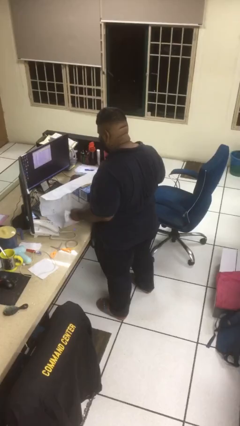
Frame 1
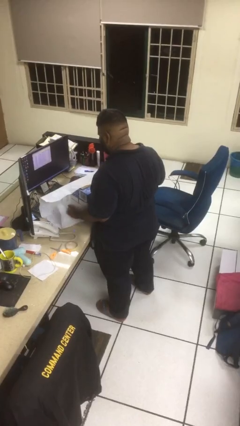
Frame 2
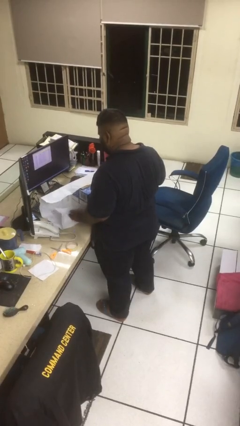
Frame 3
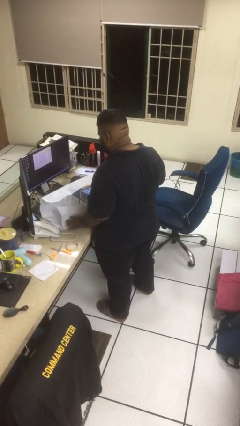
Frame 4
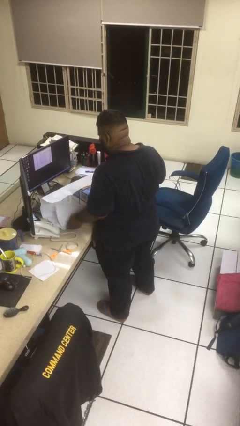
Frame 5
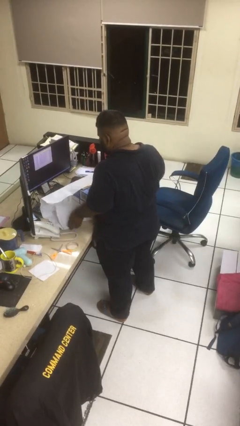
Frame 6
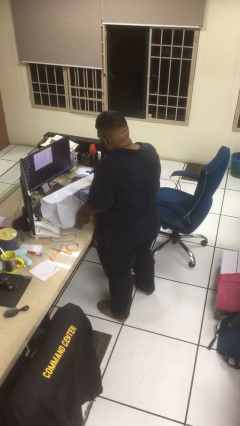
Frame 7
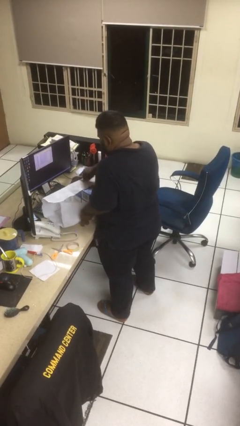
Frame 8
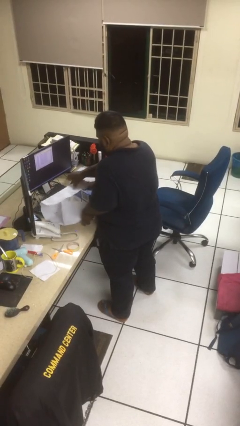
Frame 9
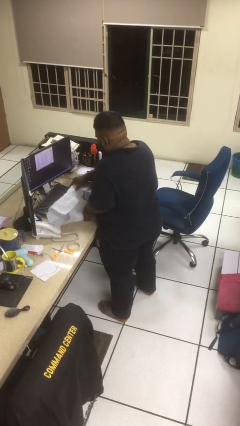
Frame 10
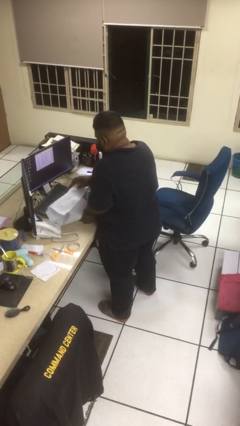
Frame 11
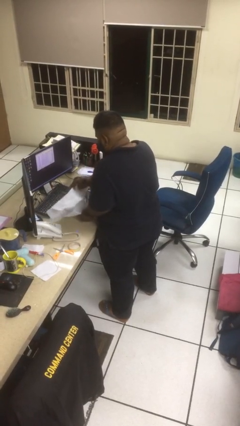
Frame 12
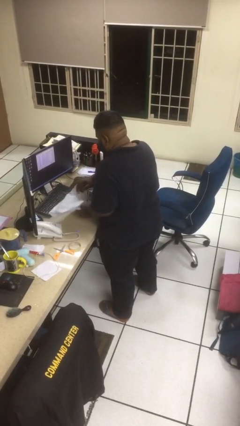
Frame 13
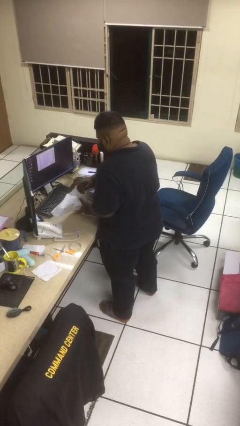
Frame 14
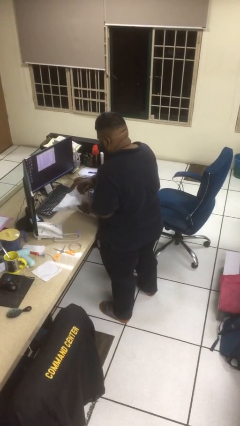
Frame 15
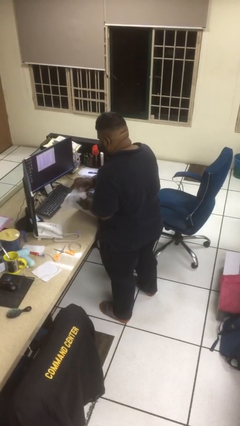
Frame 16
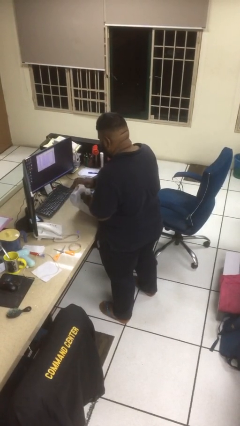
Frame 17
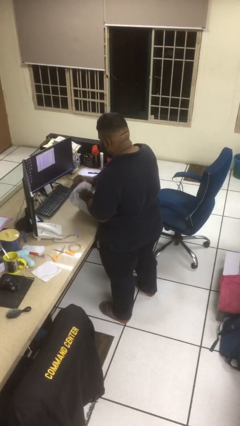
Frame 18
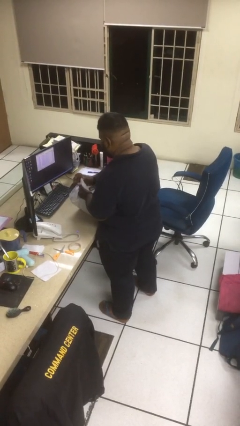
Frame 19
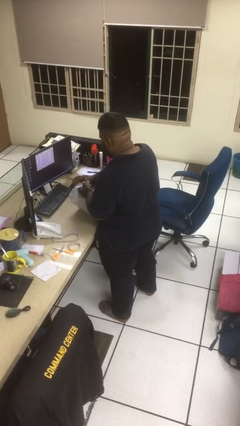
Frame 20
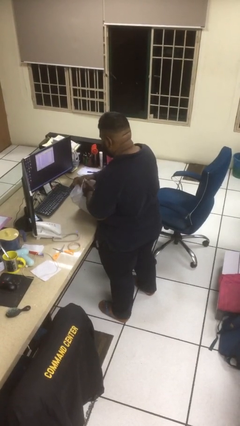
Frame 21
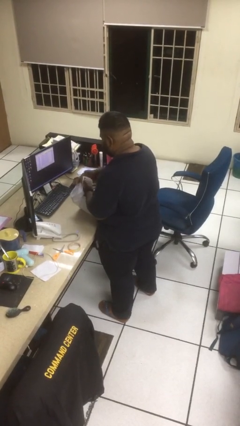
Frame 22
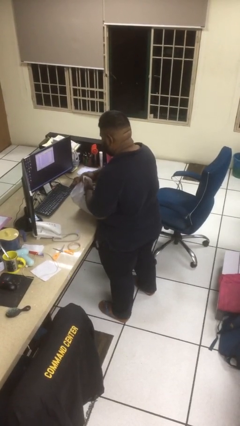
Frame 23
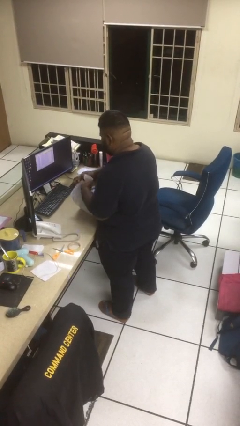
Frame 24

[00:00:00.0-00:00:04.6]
person wraps box

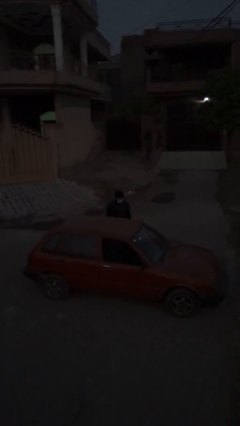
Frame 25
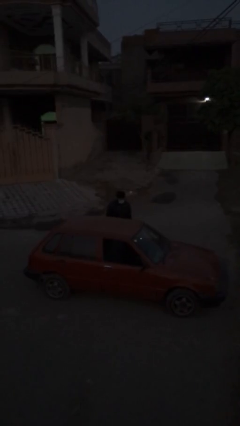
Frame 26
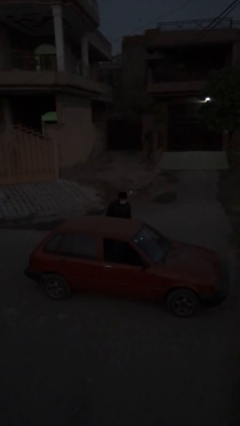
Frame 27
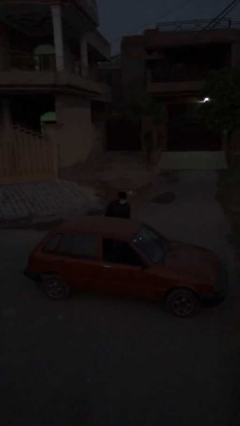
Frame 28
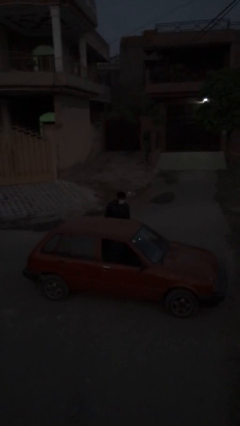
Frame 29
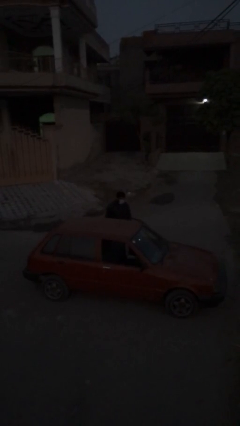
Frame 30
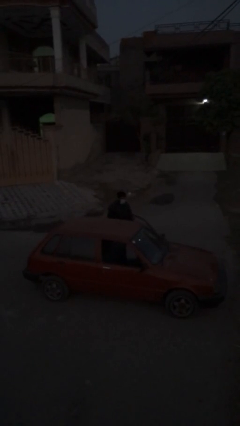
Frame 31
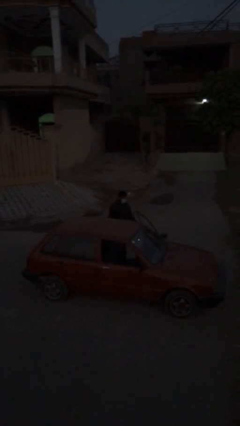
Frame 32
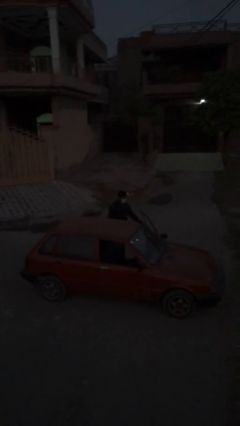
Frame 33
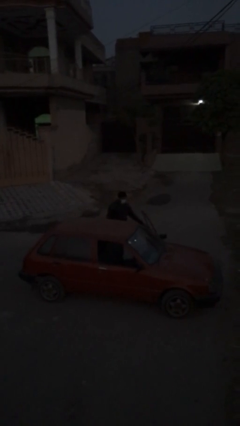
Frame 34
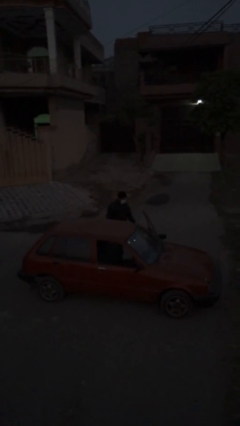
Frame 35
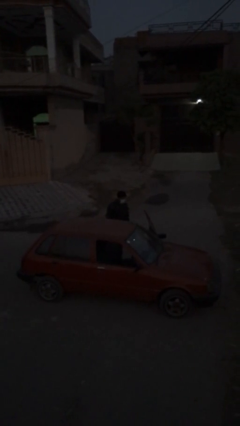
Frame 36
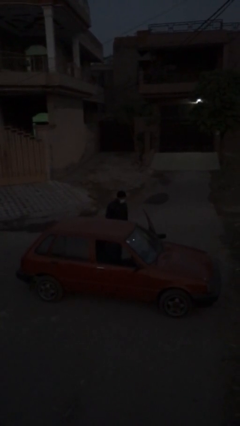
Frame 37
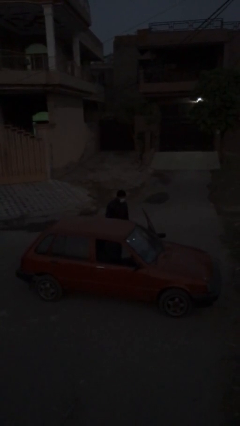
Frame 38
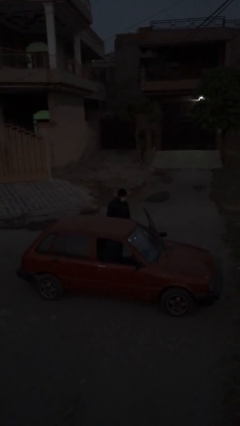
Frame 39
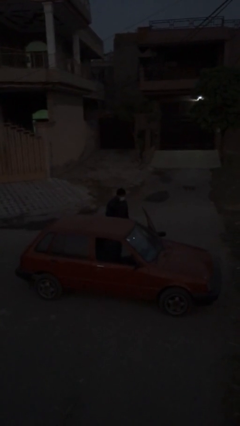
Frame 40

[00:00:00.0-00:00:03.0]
person opens car door

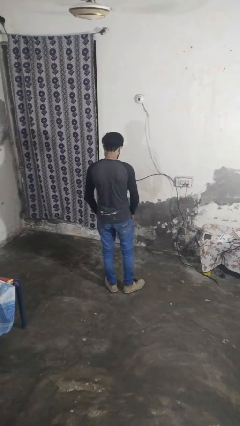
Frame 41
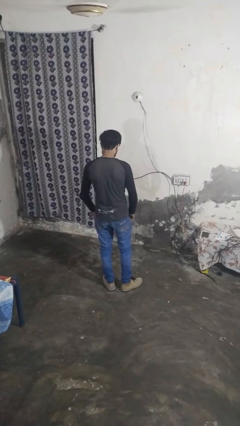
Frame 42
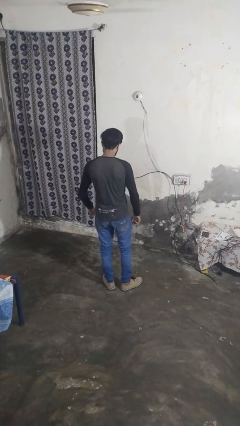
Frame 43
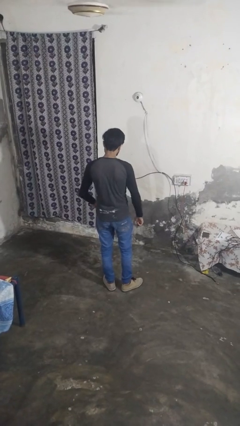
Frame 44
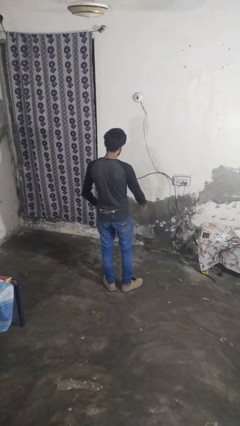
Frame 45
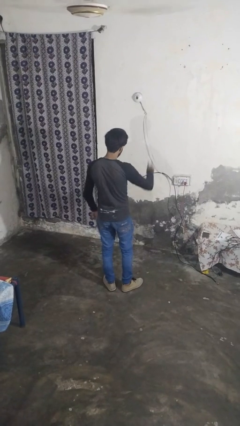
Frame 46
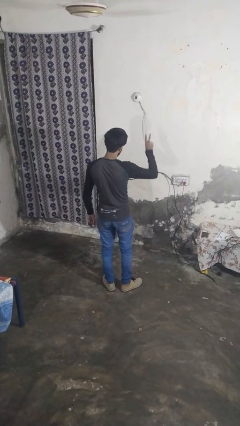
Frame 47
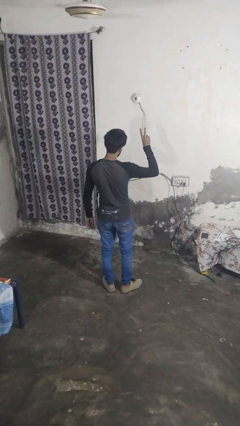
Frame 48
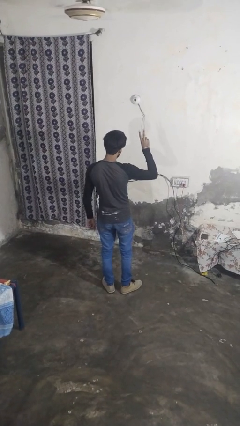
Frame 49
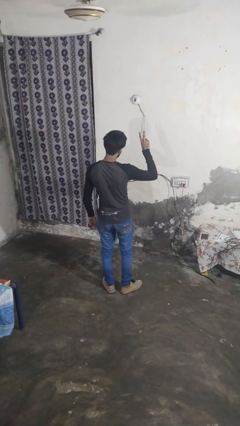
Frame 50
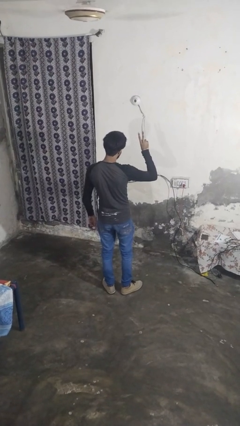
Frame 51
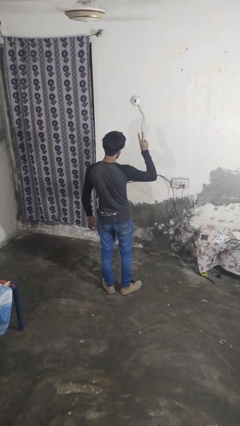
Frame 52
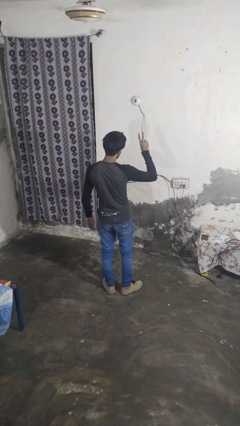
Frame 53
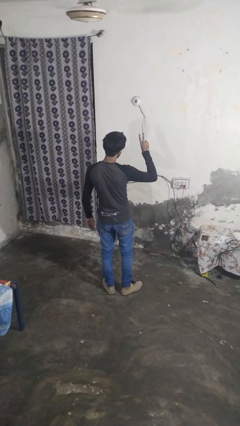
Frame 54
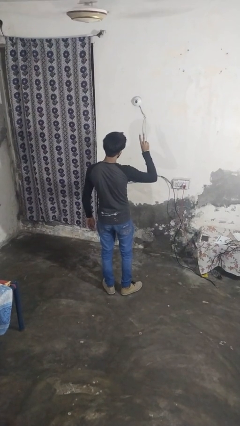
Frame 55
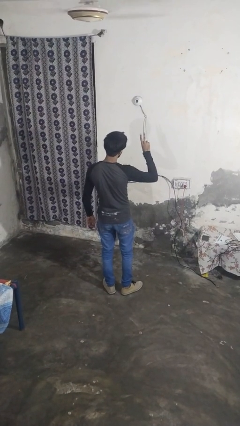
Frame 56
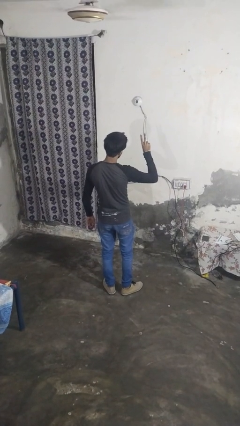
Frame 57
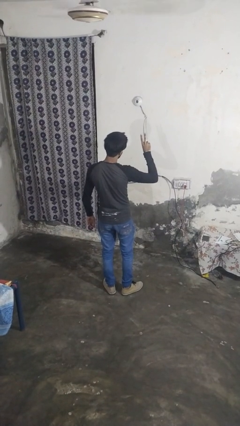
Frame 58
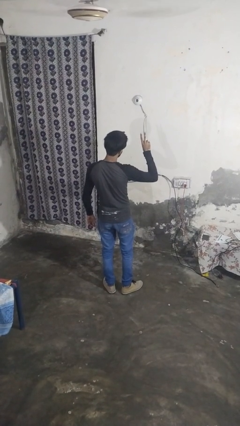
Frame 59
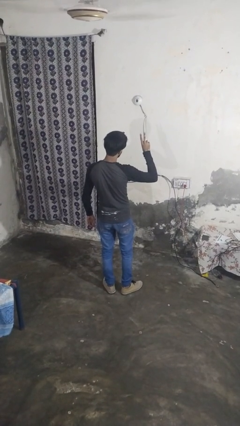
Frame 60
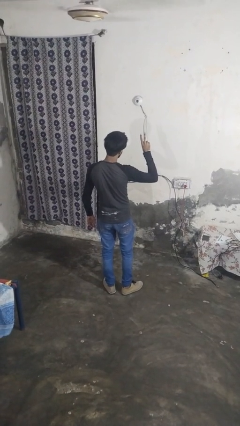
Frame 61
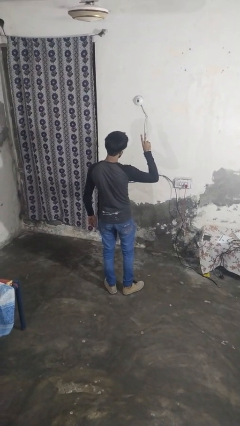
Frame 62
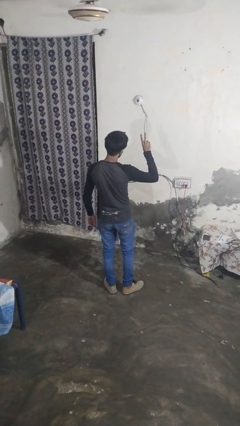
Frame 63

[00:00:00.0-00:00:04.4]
person gestures peace

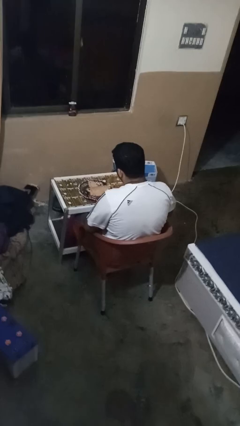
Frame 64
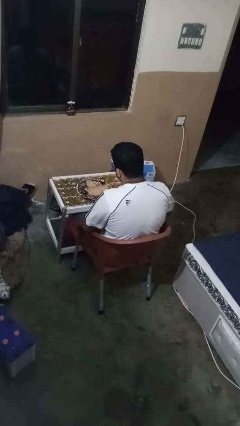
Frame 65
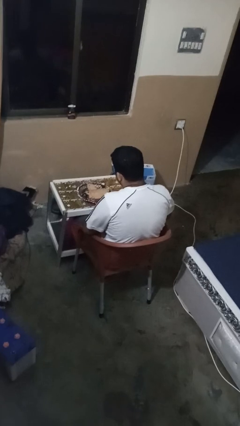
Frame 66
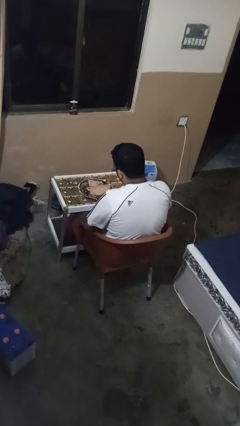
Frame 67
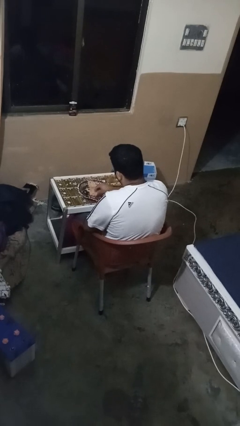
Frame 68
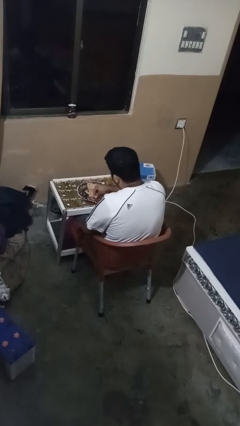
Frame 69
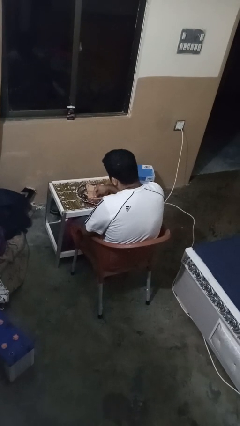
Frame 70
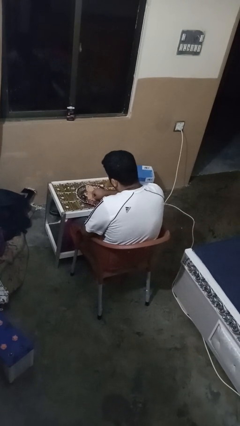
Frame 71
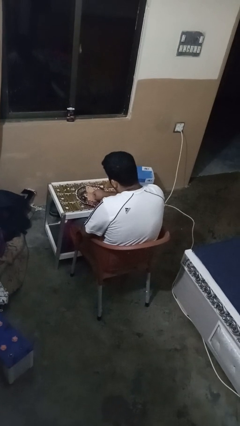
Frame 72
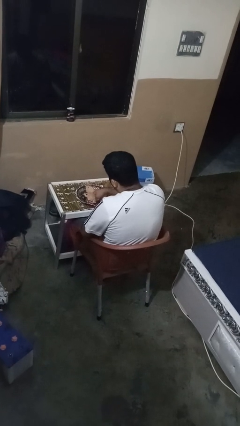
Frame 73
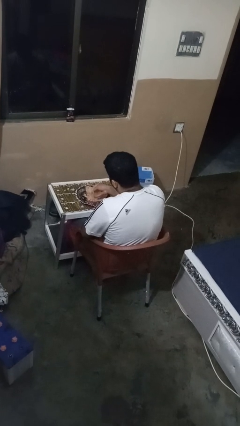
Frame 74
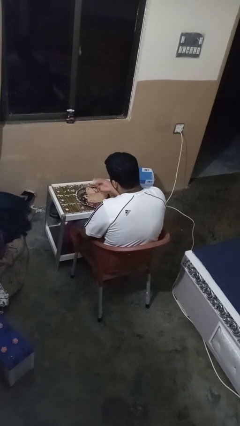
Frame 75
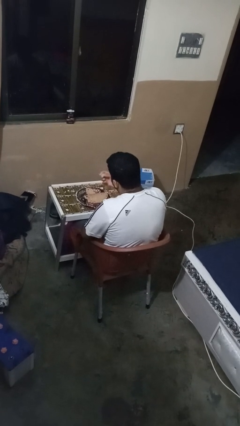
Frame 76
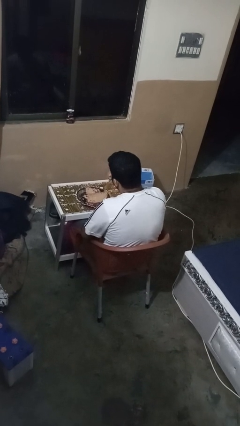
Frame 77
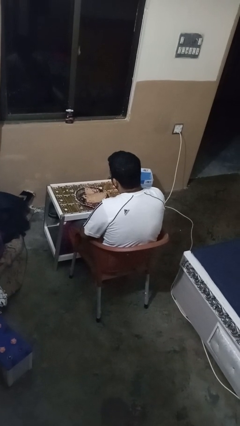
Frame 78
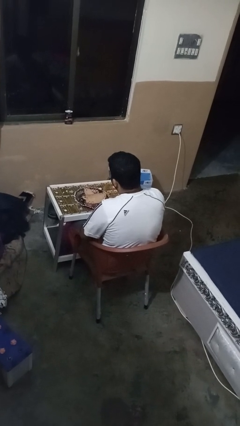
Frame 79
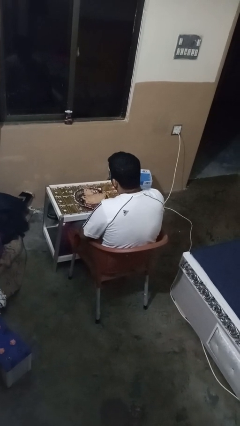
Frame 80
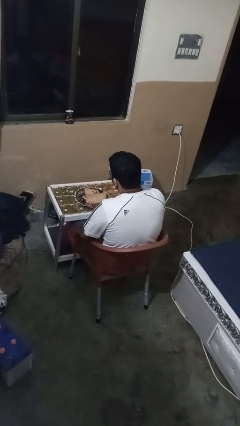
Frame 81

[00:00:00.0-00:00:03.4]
person eats with hands

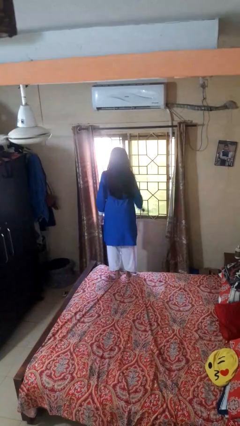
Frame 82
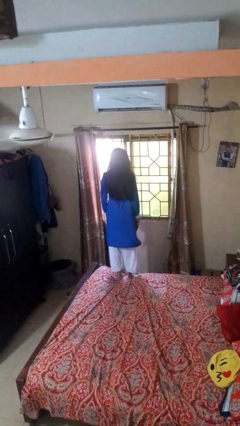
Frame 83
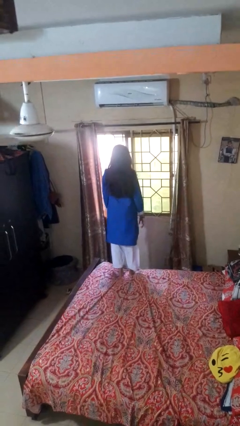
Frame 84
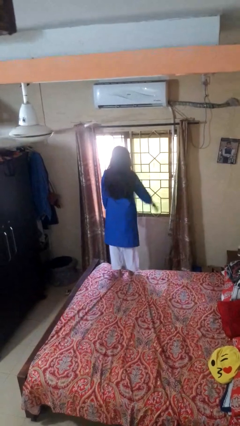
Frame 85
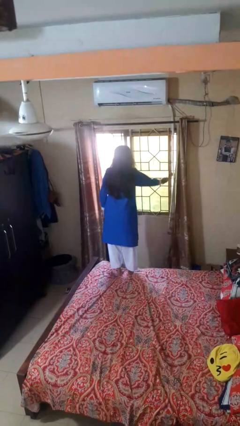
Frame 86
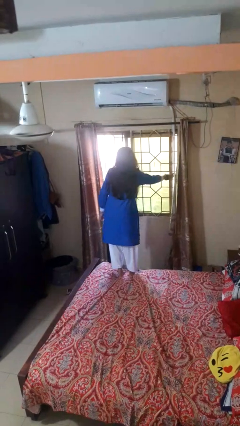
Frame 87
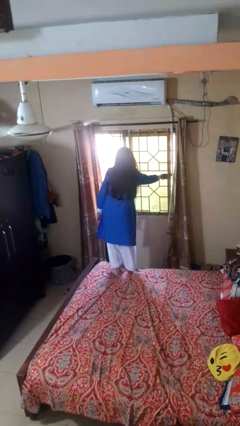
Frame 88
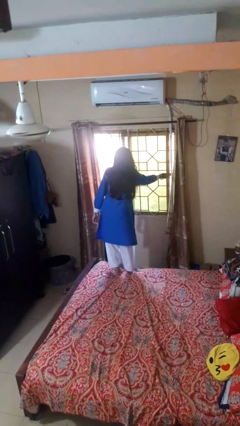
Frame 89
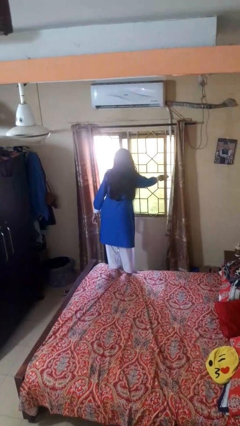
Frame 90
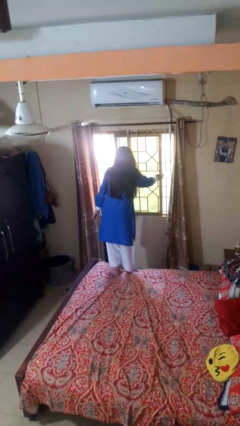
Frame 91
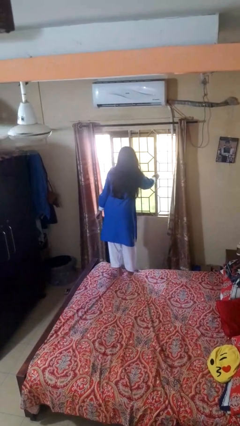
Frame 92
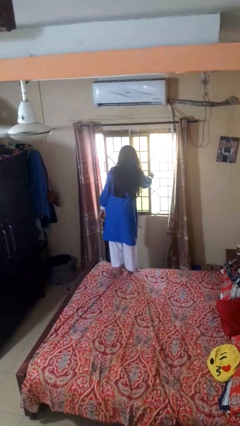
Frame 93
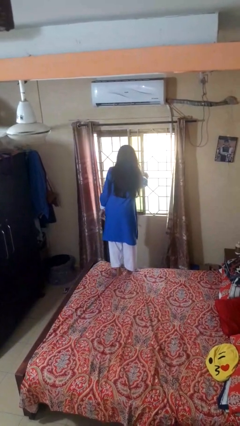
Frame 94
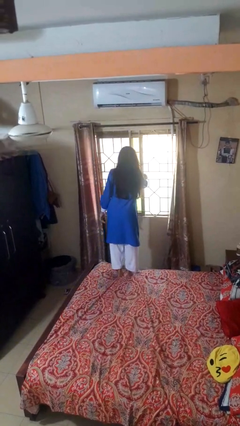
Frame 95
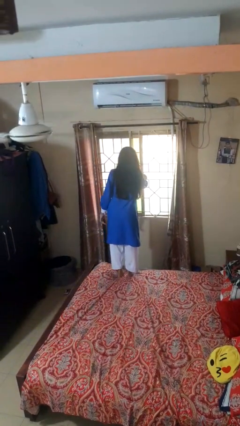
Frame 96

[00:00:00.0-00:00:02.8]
person closes home window
